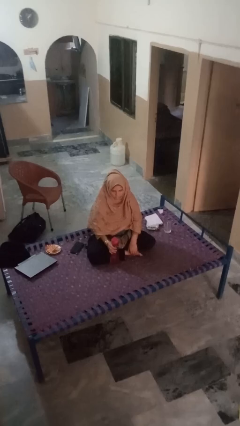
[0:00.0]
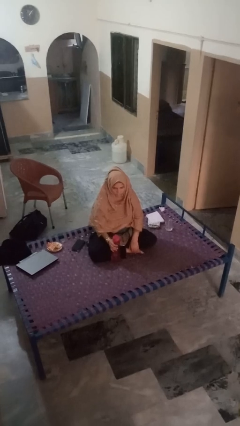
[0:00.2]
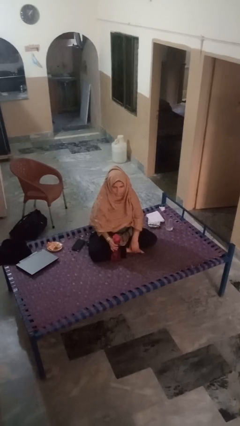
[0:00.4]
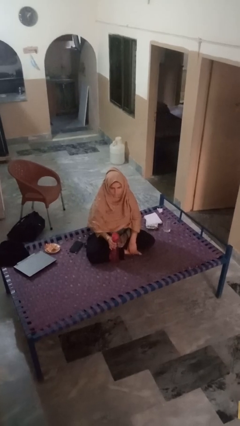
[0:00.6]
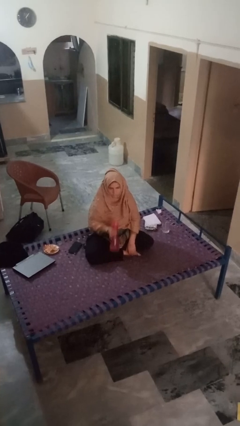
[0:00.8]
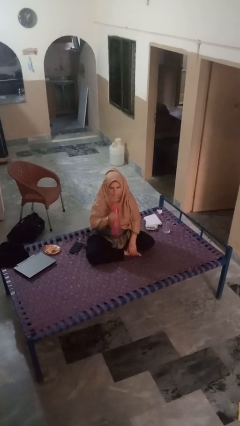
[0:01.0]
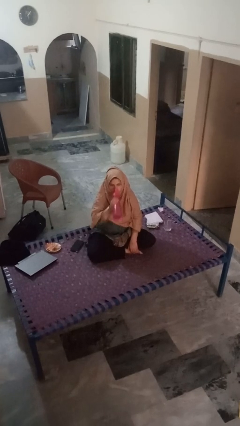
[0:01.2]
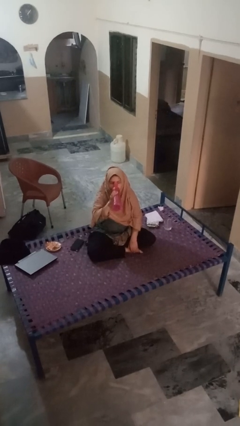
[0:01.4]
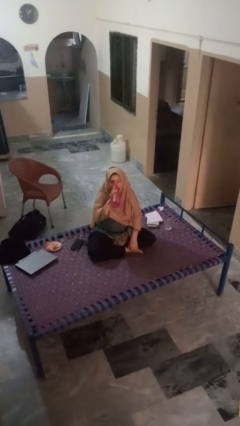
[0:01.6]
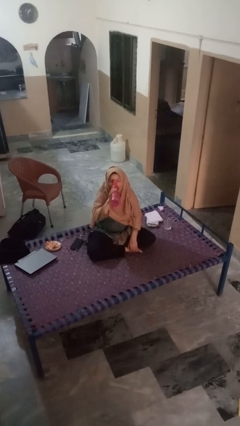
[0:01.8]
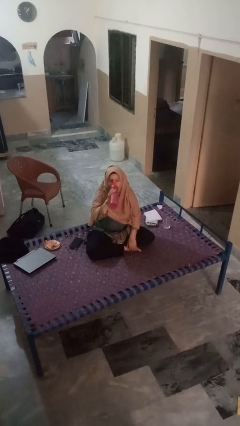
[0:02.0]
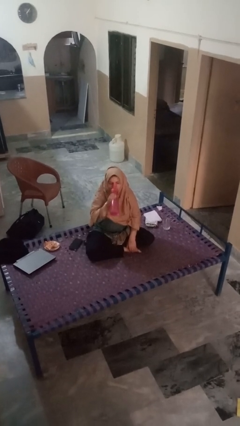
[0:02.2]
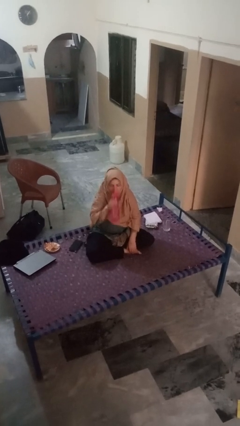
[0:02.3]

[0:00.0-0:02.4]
person drinks from bottle

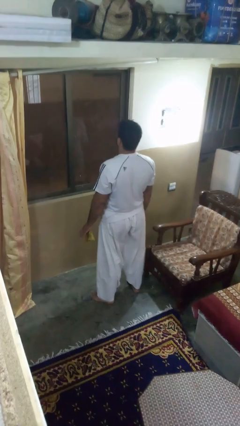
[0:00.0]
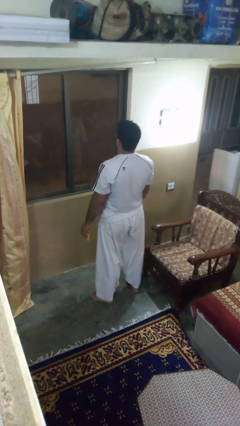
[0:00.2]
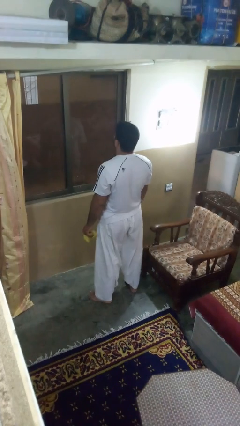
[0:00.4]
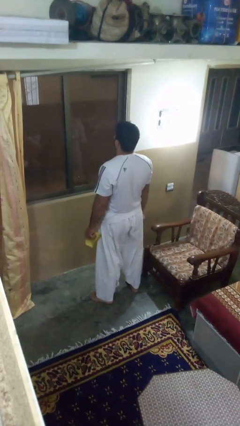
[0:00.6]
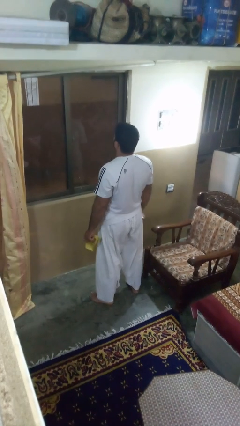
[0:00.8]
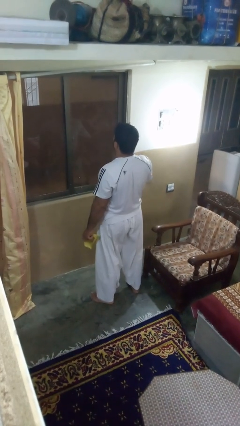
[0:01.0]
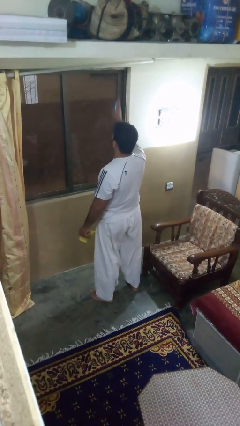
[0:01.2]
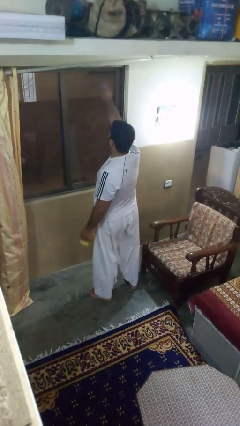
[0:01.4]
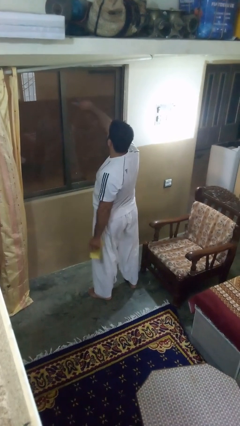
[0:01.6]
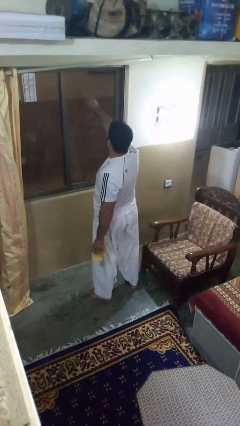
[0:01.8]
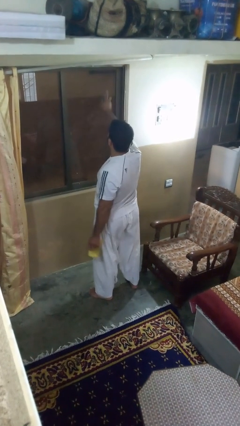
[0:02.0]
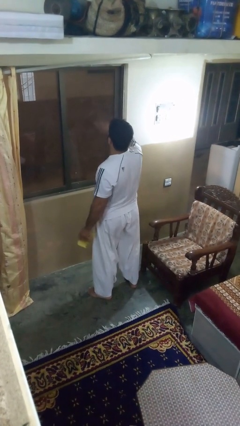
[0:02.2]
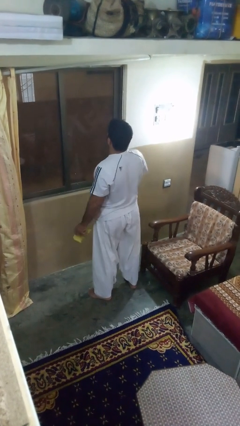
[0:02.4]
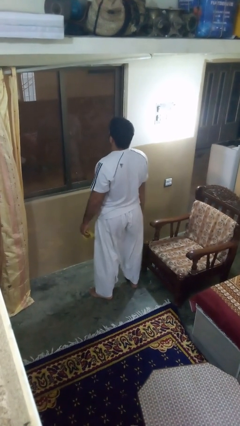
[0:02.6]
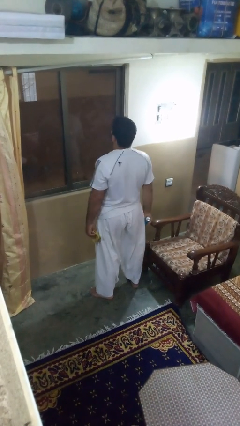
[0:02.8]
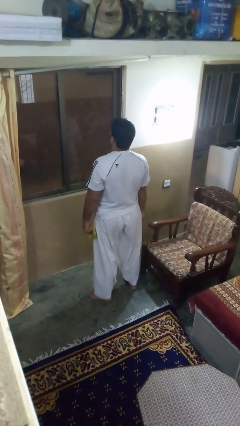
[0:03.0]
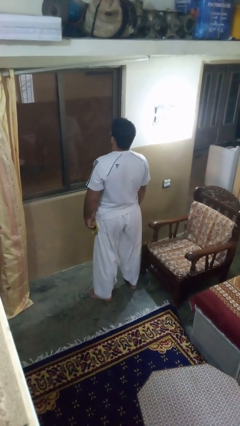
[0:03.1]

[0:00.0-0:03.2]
person sprays from bottle

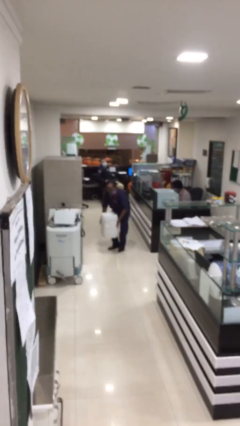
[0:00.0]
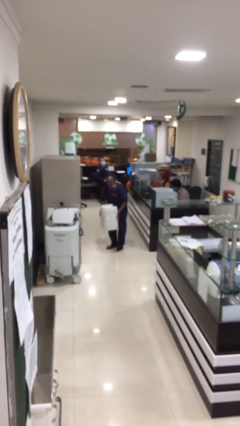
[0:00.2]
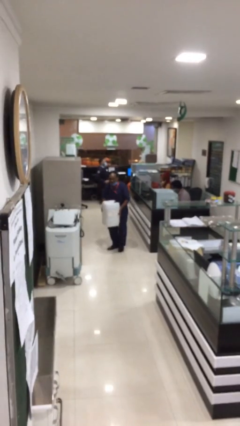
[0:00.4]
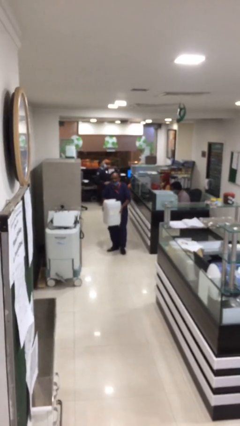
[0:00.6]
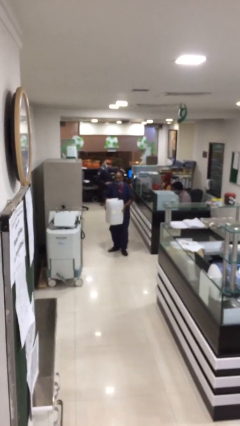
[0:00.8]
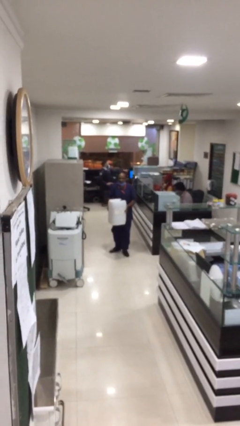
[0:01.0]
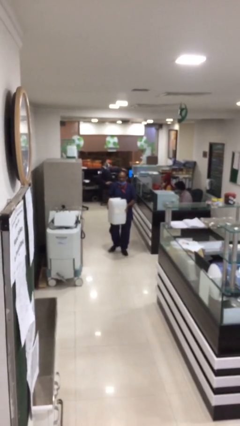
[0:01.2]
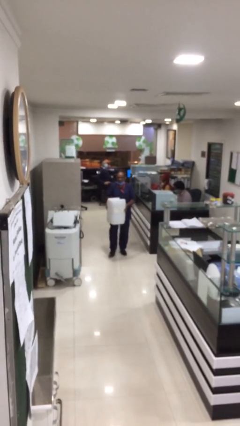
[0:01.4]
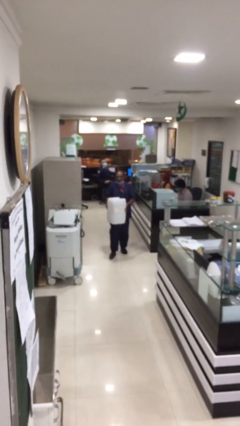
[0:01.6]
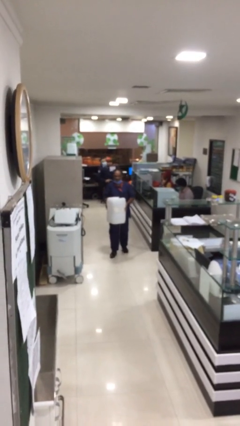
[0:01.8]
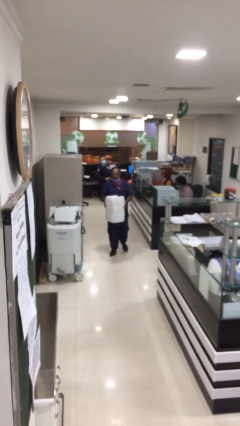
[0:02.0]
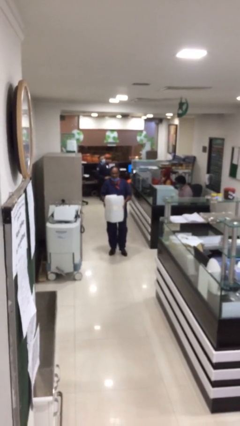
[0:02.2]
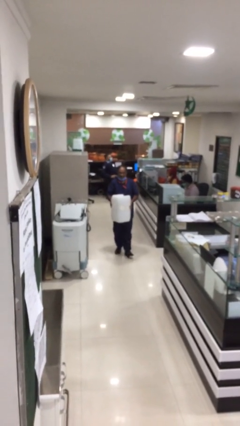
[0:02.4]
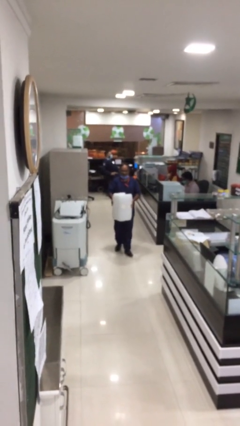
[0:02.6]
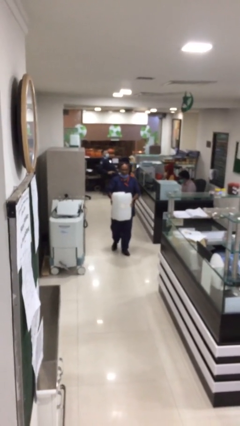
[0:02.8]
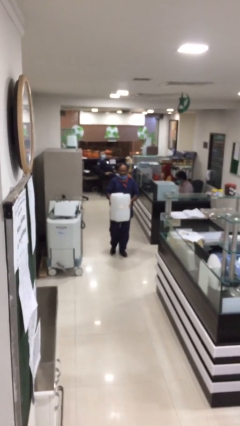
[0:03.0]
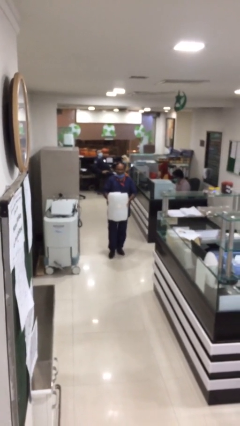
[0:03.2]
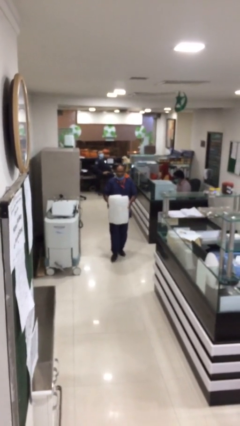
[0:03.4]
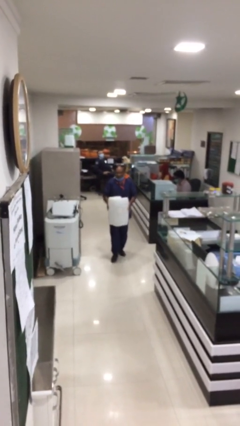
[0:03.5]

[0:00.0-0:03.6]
person carries heavy object

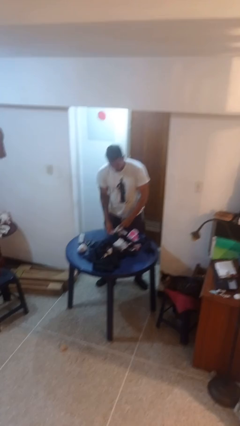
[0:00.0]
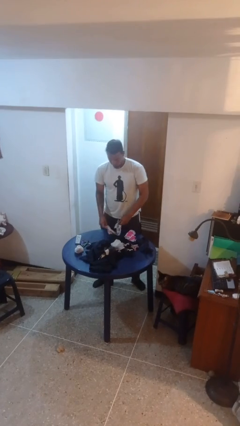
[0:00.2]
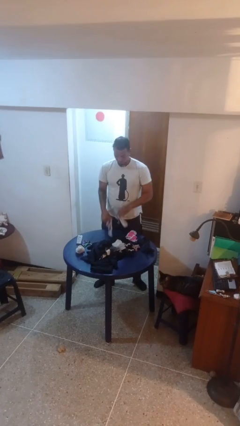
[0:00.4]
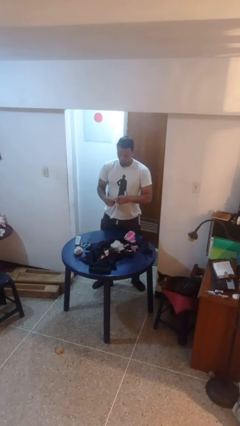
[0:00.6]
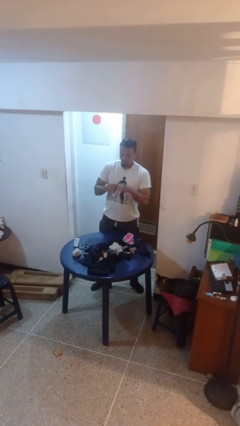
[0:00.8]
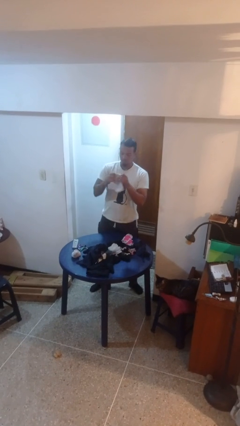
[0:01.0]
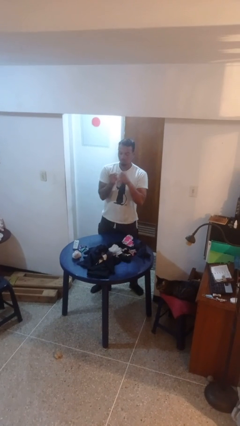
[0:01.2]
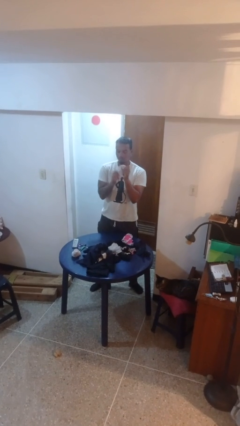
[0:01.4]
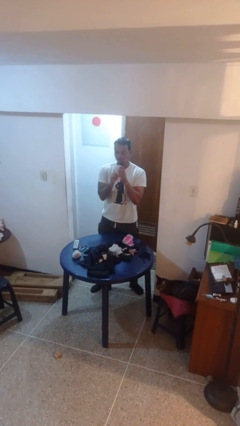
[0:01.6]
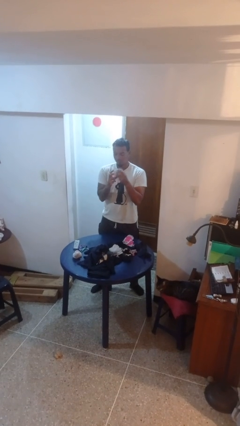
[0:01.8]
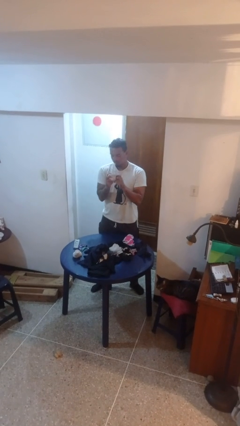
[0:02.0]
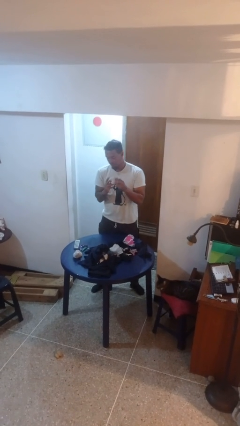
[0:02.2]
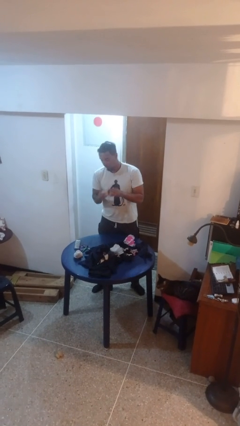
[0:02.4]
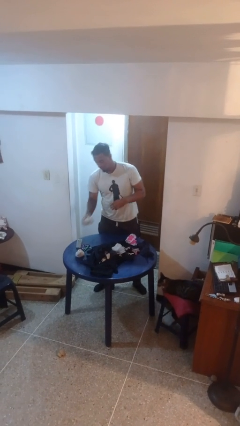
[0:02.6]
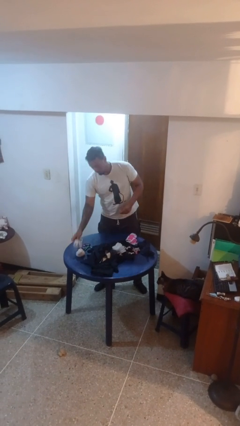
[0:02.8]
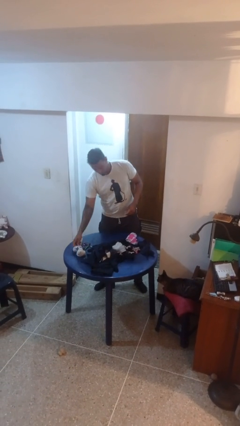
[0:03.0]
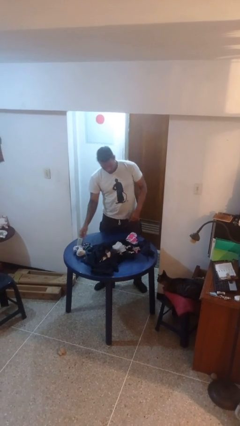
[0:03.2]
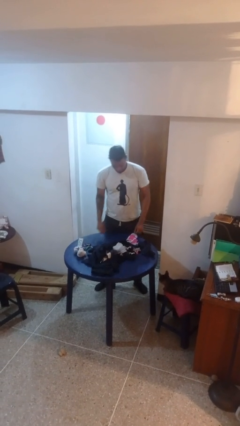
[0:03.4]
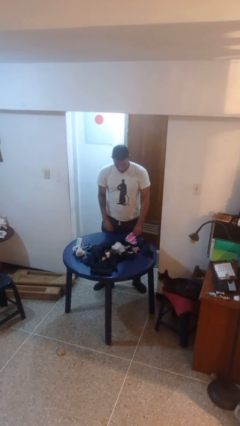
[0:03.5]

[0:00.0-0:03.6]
person folds socks

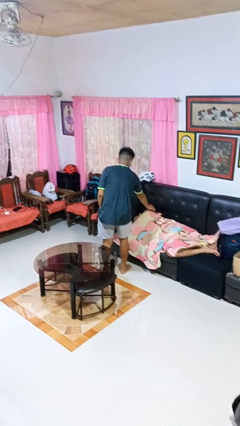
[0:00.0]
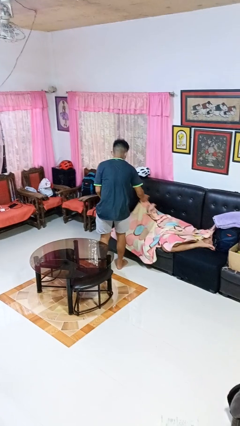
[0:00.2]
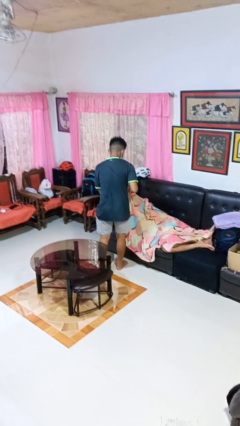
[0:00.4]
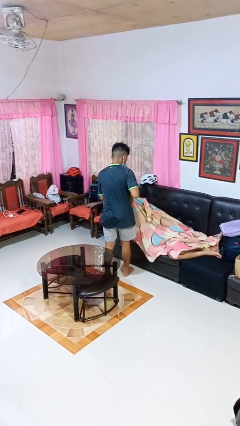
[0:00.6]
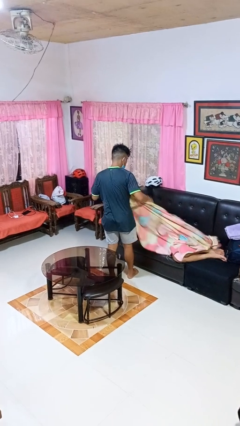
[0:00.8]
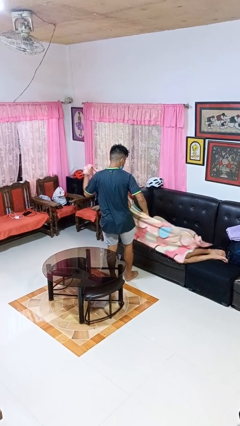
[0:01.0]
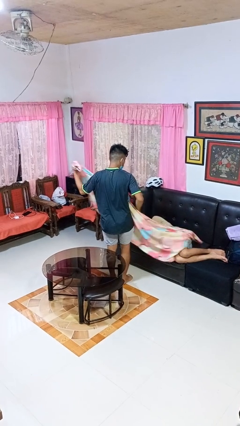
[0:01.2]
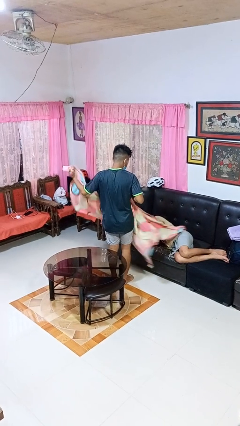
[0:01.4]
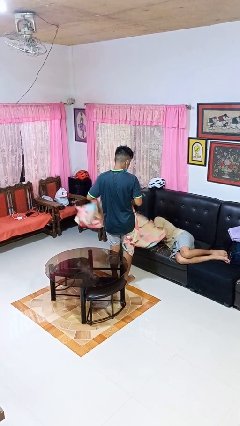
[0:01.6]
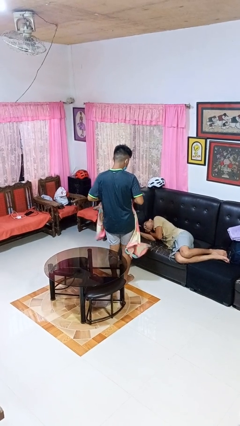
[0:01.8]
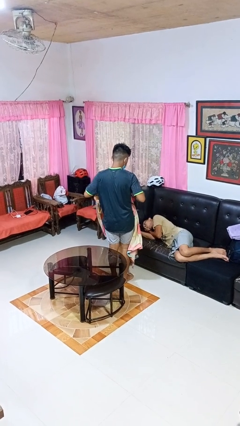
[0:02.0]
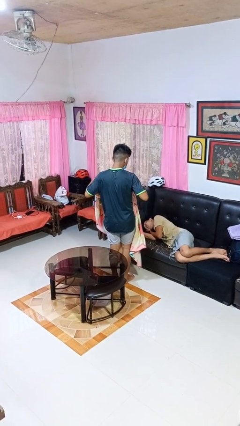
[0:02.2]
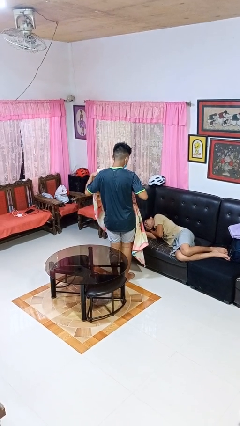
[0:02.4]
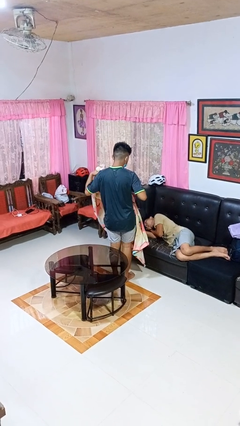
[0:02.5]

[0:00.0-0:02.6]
person uncovers friend with blanket

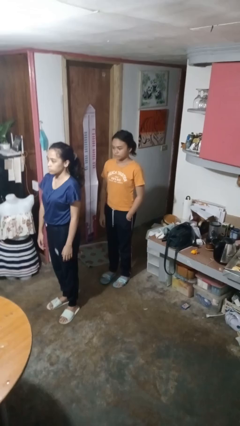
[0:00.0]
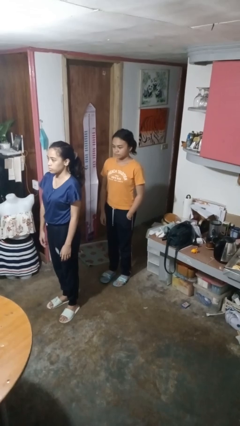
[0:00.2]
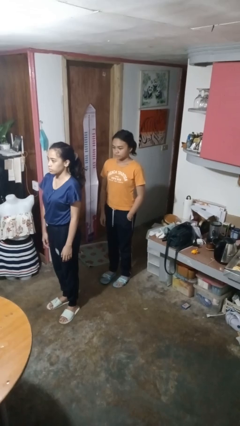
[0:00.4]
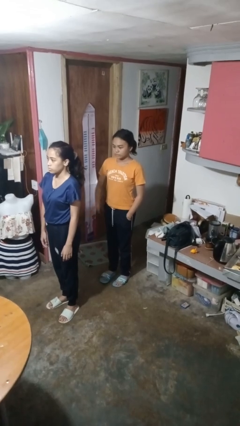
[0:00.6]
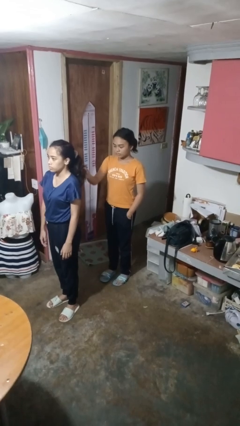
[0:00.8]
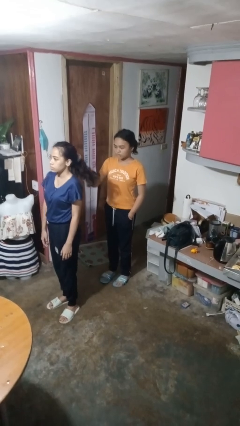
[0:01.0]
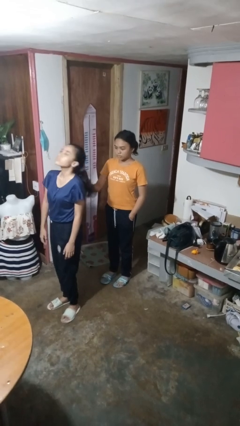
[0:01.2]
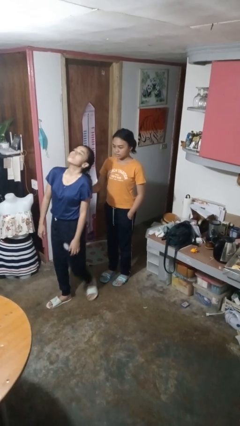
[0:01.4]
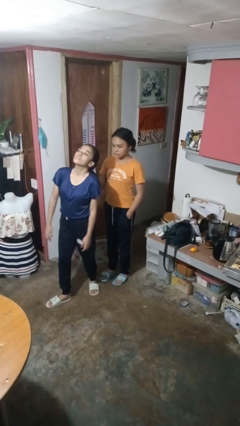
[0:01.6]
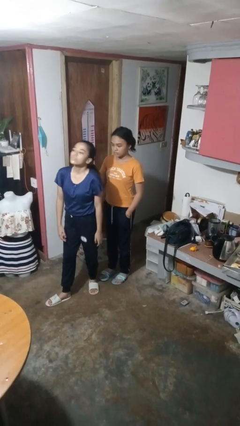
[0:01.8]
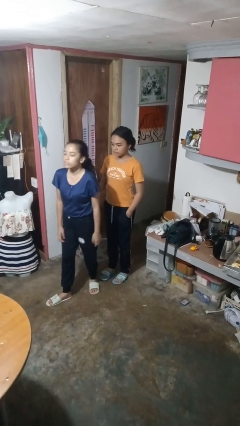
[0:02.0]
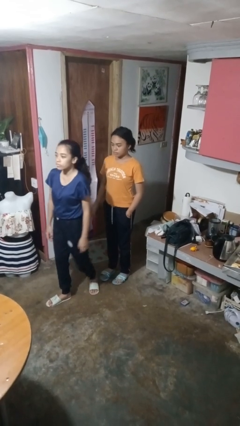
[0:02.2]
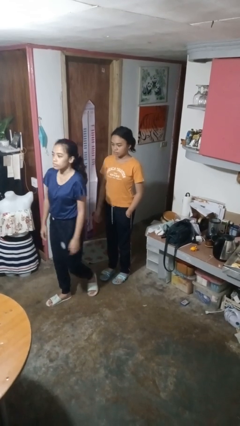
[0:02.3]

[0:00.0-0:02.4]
person grabs person by hair
